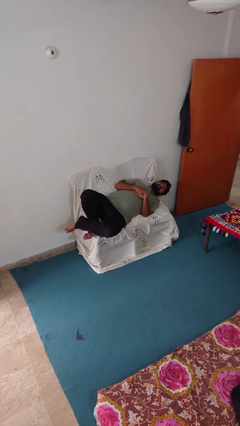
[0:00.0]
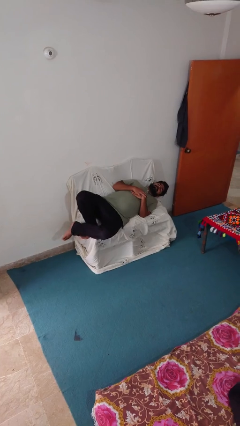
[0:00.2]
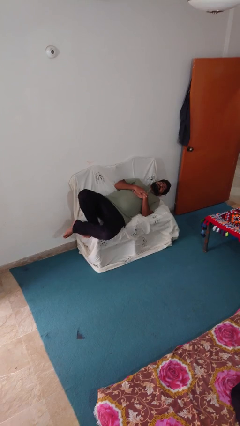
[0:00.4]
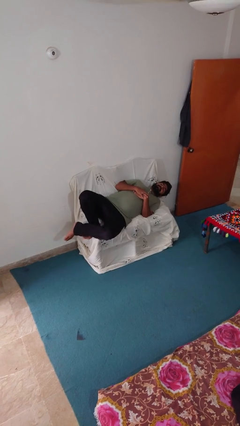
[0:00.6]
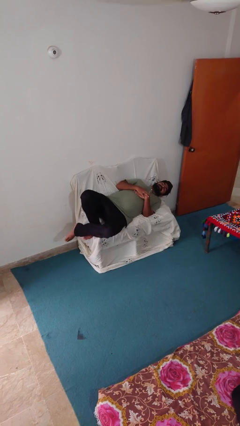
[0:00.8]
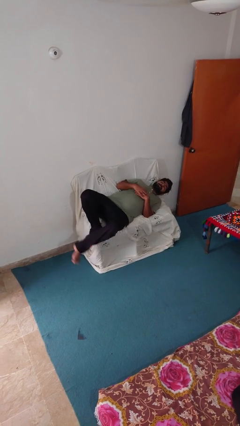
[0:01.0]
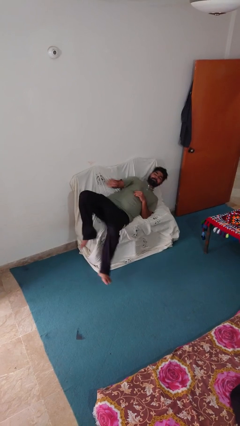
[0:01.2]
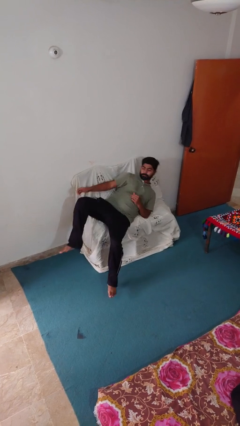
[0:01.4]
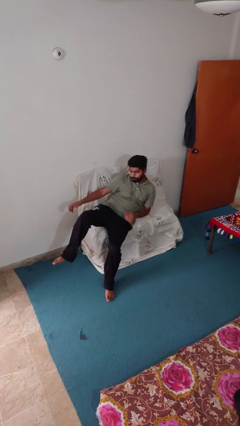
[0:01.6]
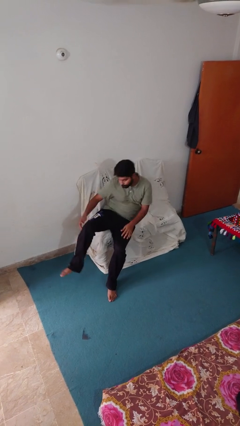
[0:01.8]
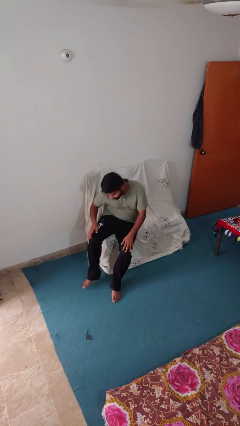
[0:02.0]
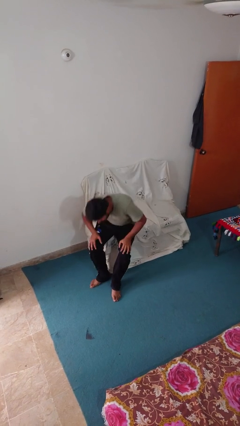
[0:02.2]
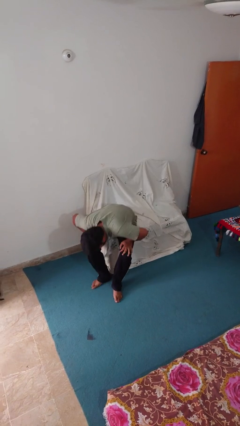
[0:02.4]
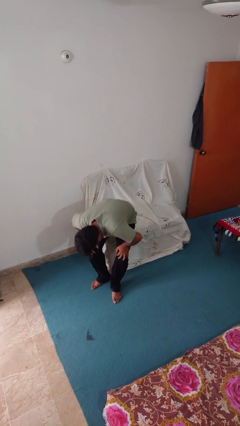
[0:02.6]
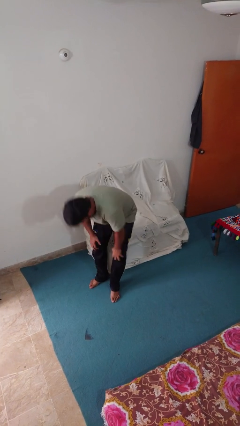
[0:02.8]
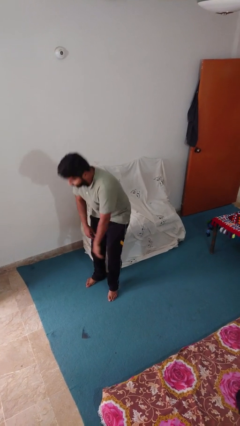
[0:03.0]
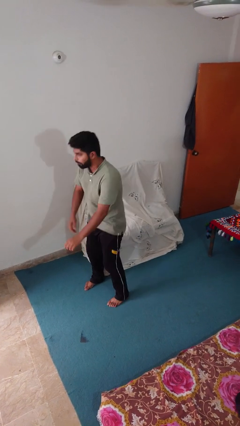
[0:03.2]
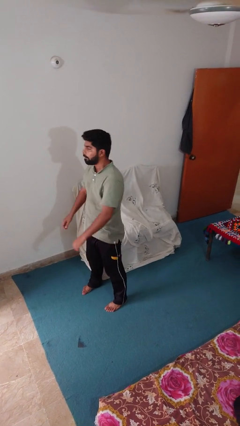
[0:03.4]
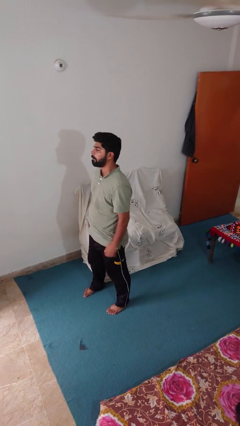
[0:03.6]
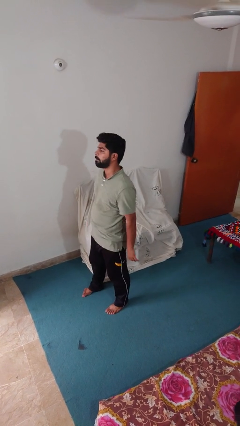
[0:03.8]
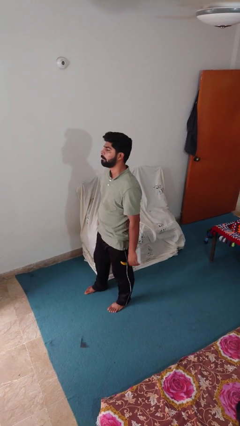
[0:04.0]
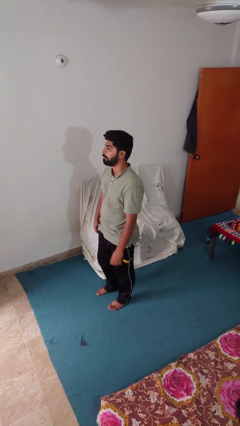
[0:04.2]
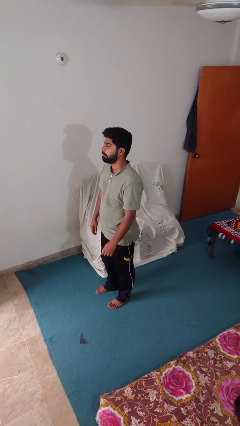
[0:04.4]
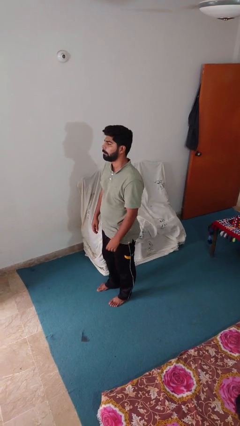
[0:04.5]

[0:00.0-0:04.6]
person stands up

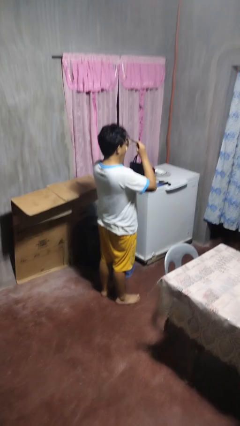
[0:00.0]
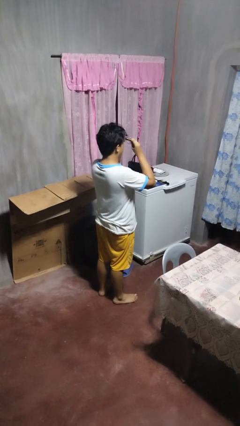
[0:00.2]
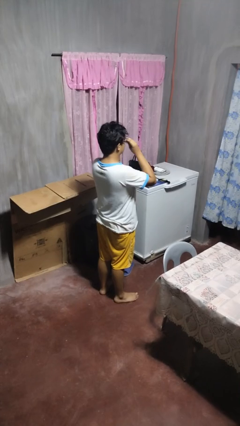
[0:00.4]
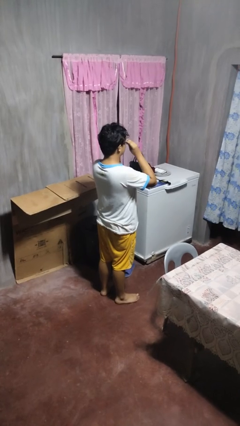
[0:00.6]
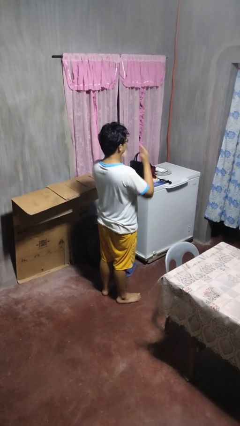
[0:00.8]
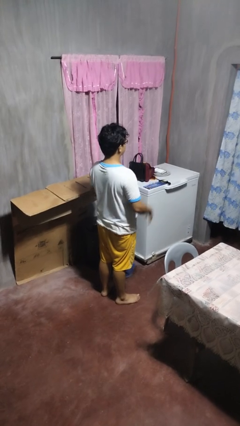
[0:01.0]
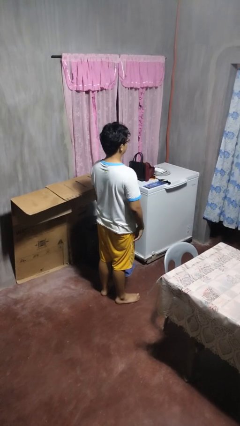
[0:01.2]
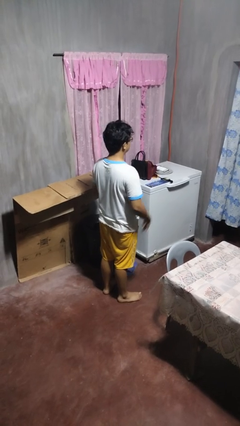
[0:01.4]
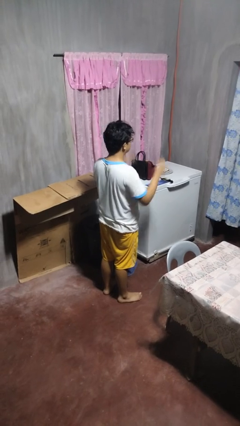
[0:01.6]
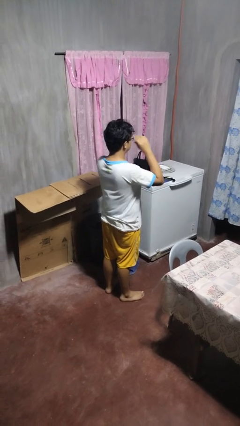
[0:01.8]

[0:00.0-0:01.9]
person puts on glasses

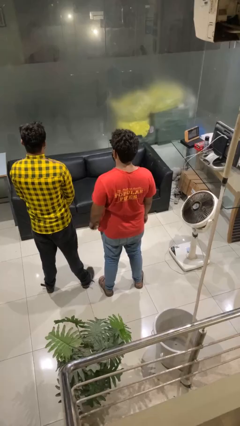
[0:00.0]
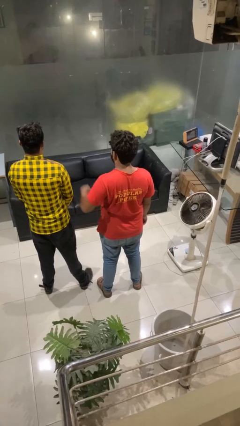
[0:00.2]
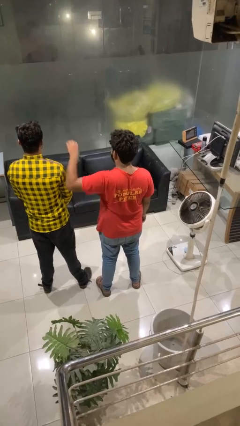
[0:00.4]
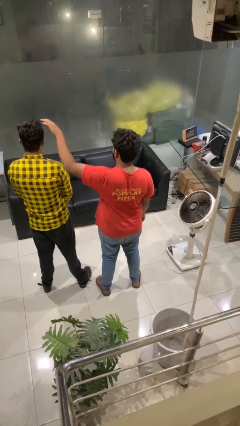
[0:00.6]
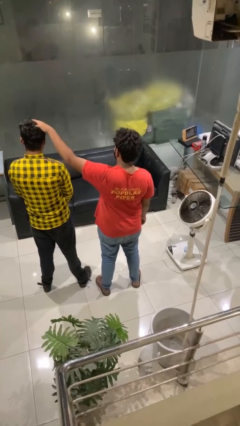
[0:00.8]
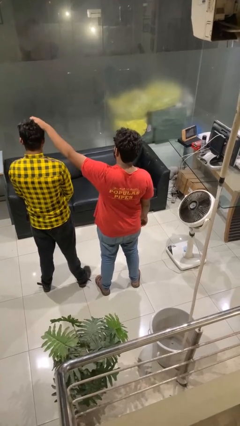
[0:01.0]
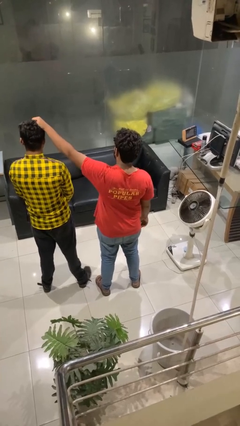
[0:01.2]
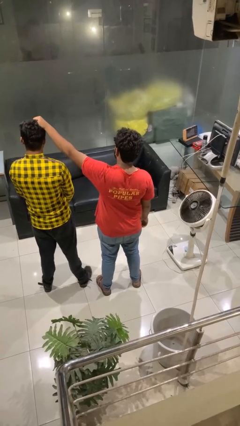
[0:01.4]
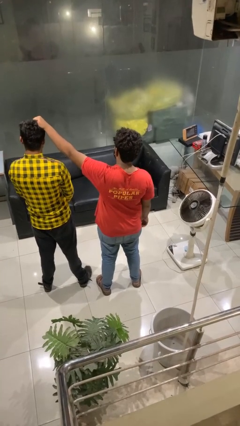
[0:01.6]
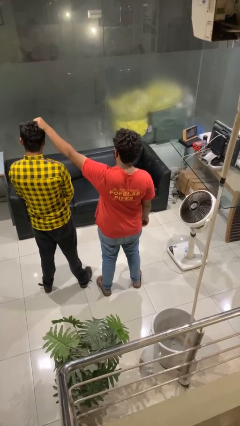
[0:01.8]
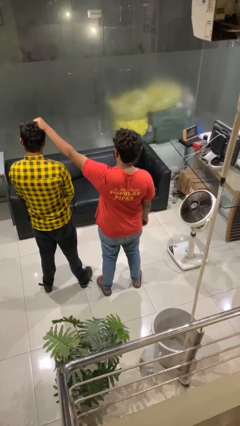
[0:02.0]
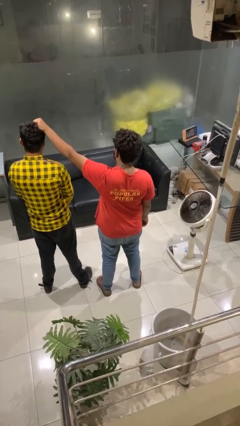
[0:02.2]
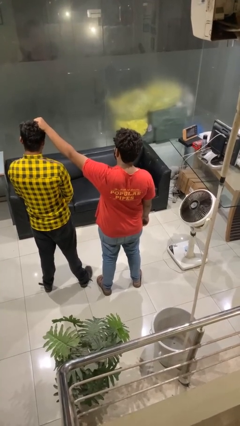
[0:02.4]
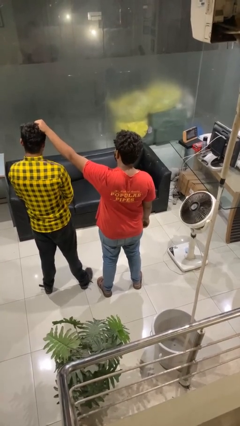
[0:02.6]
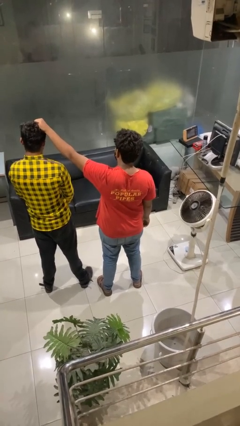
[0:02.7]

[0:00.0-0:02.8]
person grabs person by hair

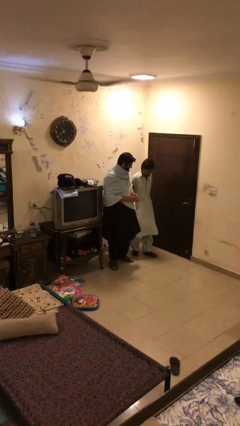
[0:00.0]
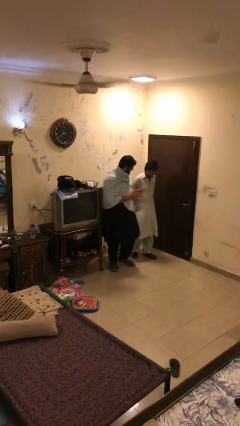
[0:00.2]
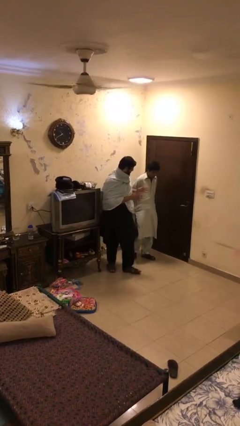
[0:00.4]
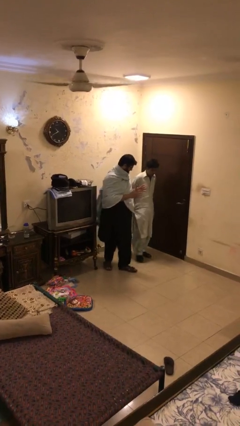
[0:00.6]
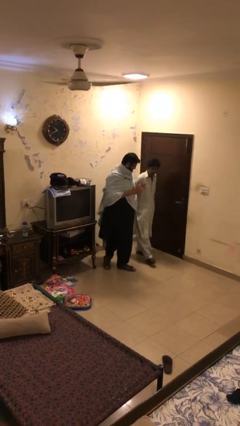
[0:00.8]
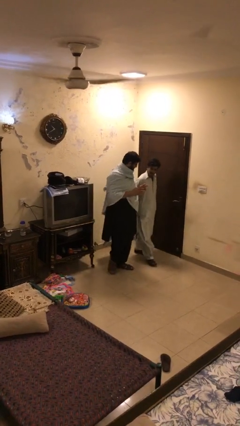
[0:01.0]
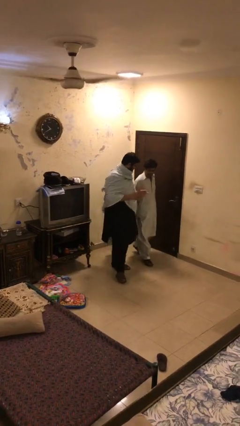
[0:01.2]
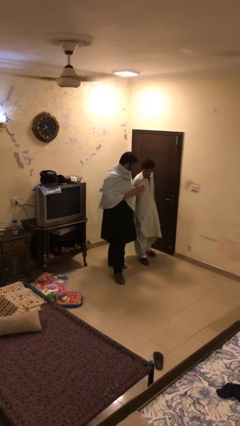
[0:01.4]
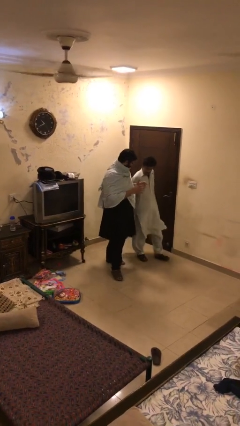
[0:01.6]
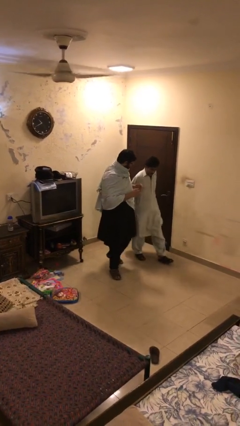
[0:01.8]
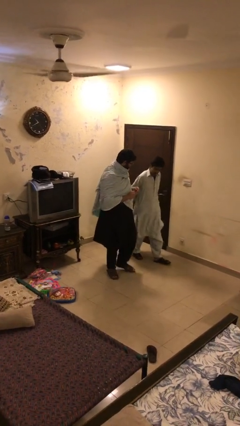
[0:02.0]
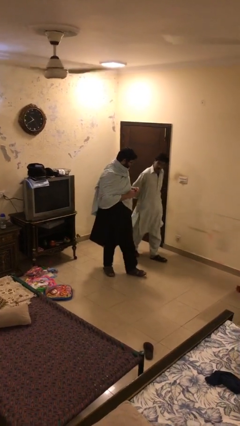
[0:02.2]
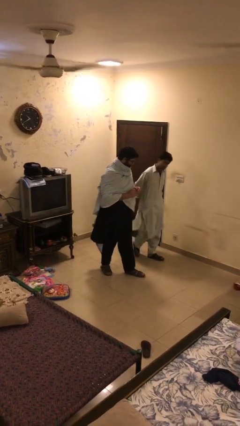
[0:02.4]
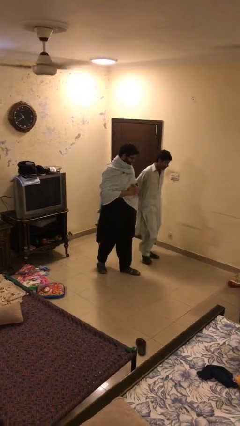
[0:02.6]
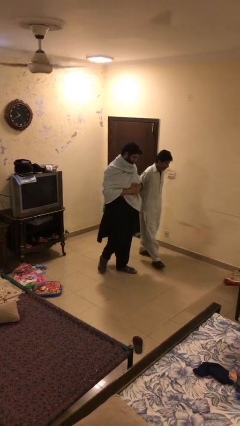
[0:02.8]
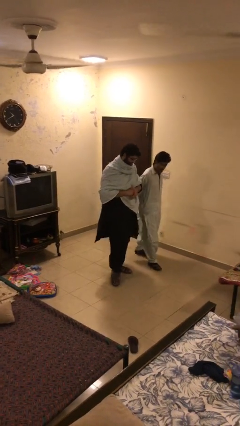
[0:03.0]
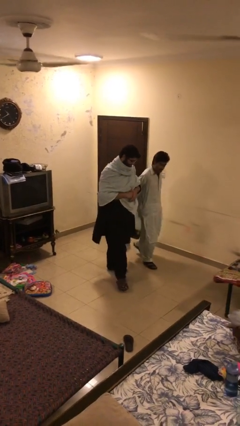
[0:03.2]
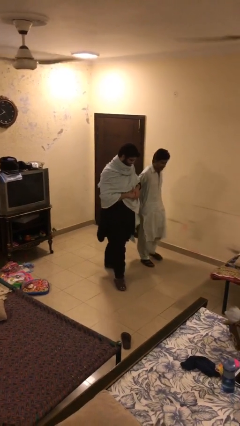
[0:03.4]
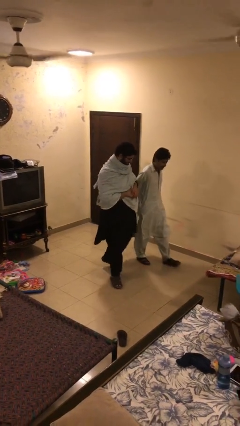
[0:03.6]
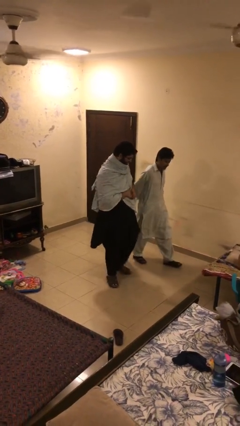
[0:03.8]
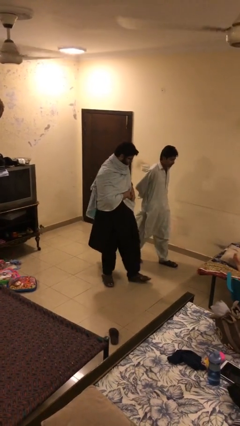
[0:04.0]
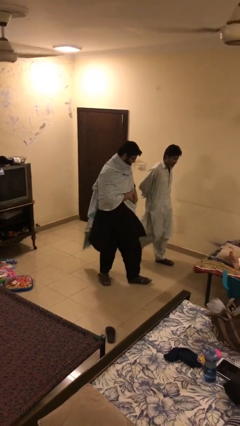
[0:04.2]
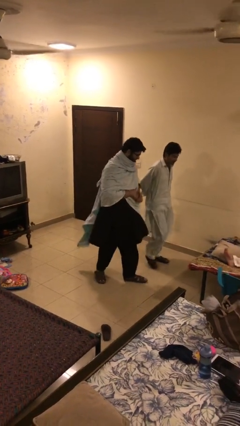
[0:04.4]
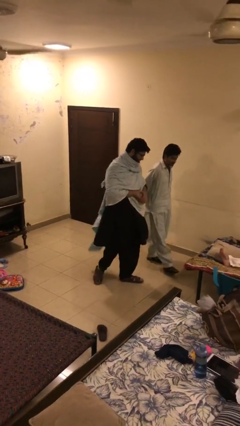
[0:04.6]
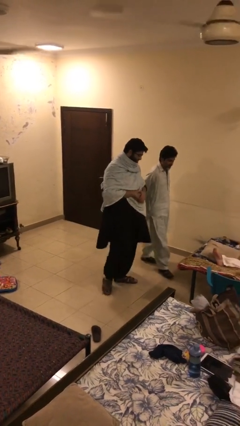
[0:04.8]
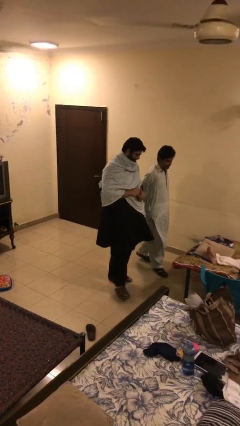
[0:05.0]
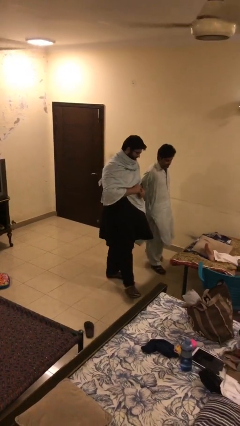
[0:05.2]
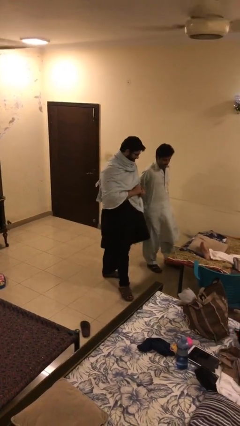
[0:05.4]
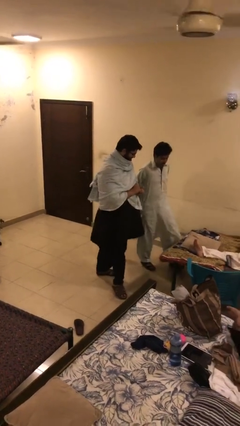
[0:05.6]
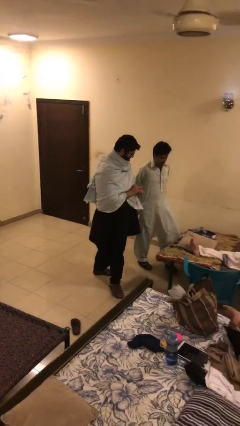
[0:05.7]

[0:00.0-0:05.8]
person talks to person

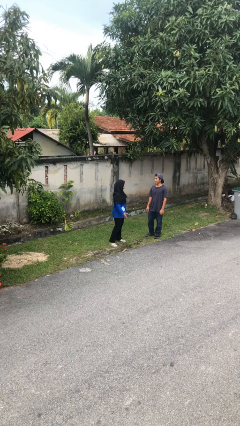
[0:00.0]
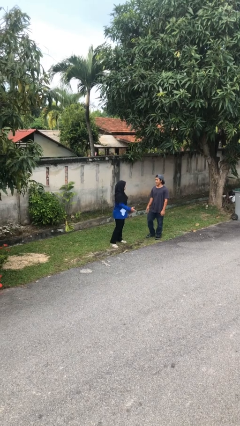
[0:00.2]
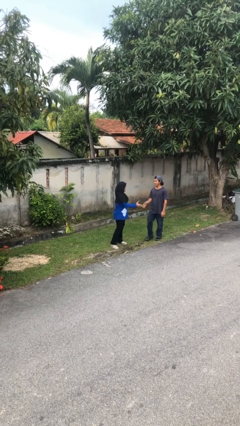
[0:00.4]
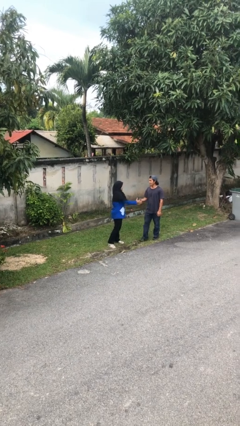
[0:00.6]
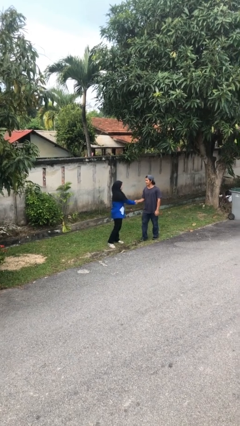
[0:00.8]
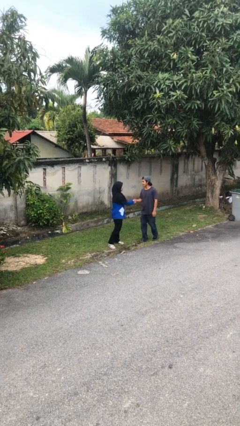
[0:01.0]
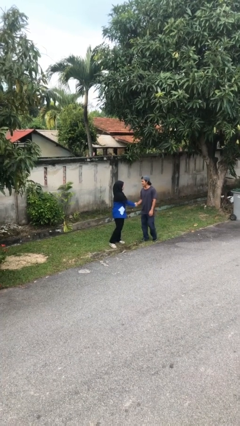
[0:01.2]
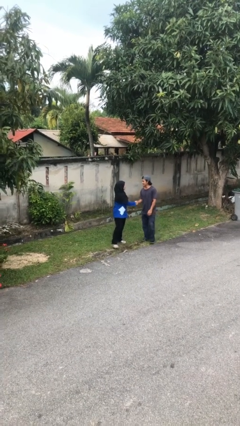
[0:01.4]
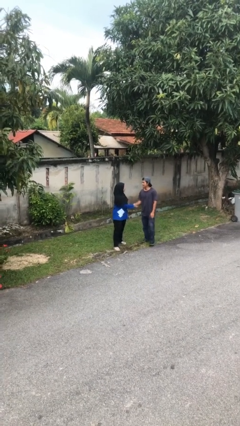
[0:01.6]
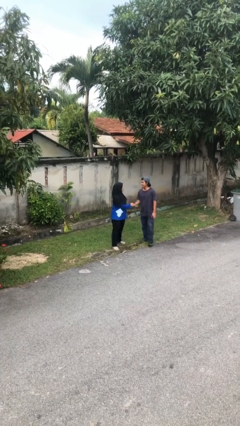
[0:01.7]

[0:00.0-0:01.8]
person shakes hand

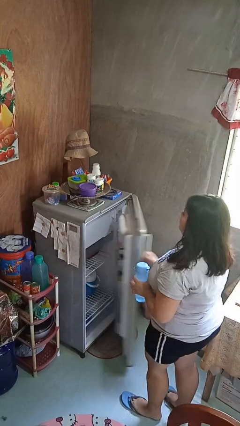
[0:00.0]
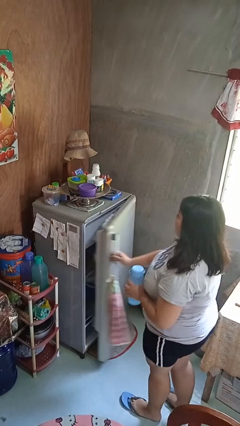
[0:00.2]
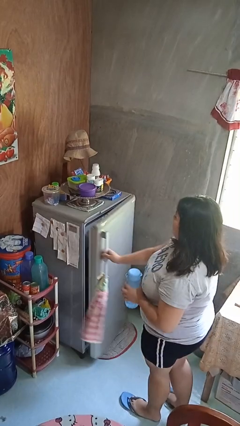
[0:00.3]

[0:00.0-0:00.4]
person closes refrigerator

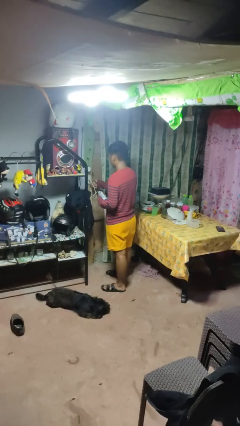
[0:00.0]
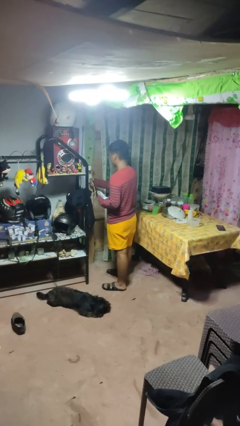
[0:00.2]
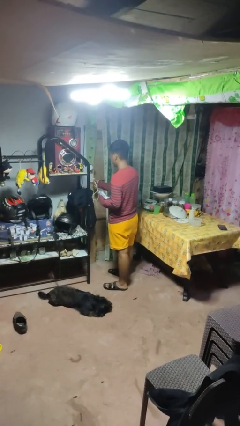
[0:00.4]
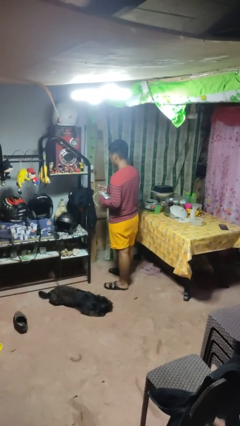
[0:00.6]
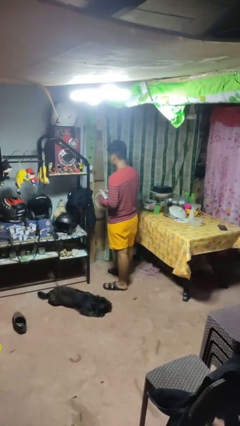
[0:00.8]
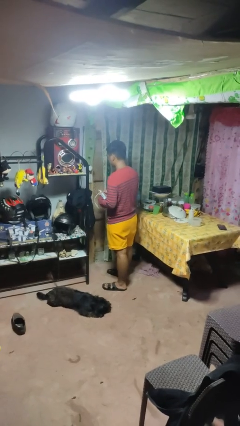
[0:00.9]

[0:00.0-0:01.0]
person unplugs from electrical socket
